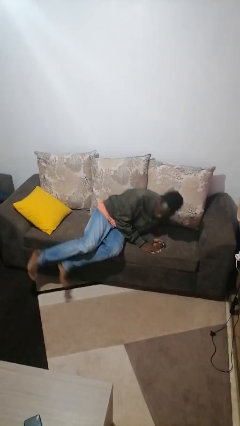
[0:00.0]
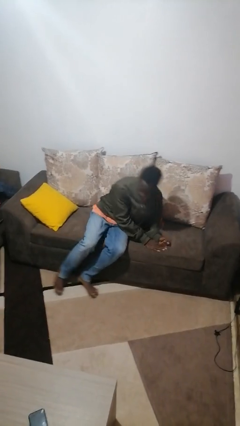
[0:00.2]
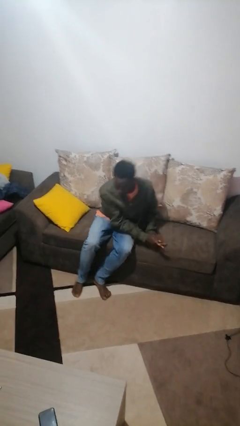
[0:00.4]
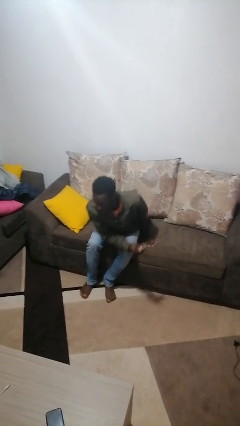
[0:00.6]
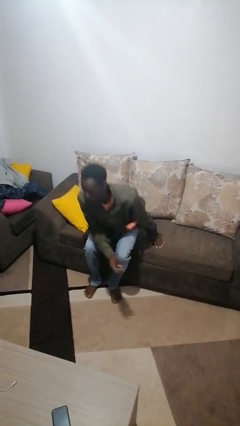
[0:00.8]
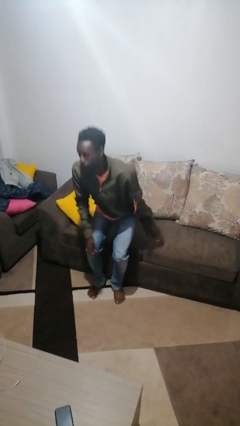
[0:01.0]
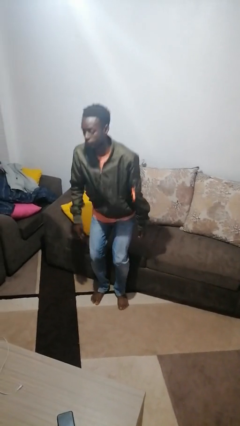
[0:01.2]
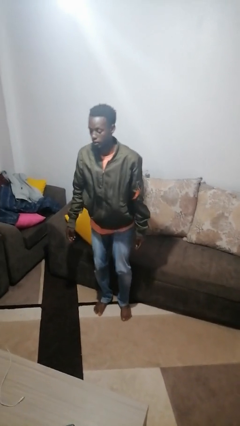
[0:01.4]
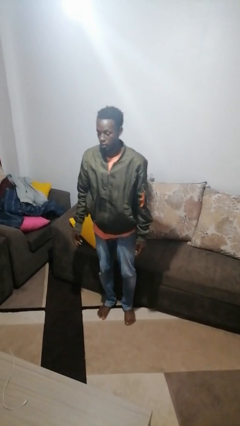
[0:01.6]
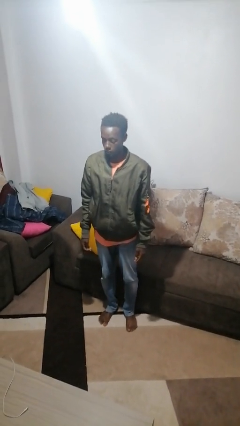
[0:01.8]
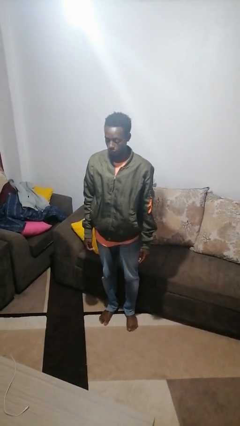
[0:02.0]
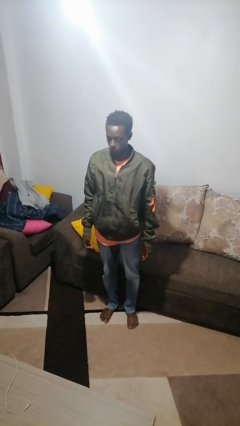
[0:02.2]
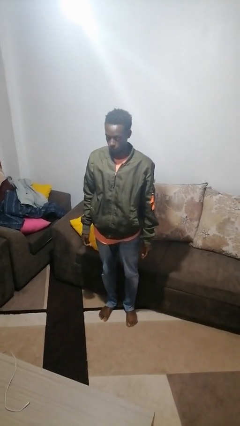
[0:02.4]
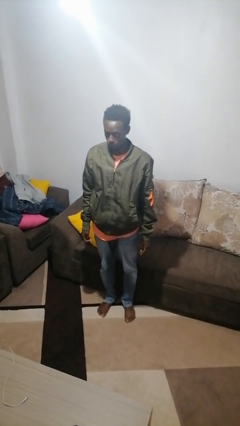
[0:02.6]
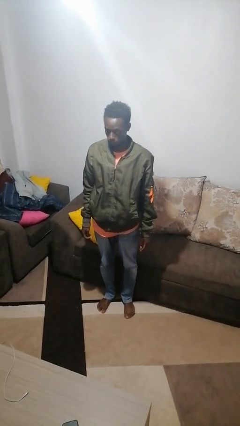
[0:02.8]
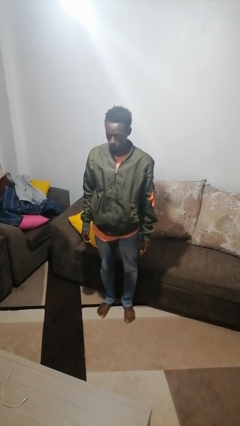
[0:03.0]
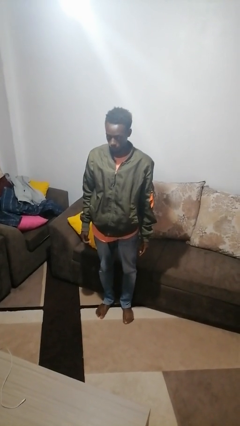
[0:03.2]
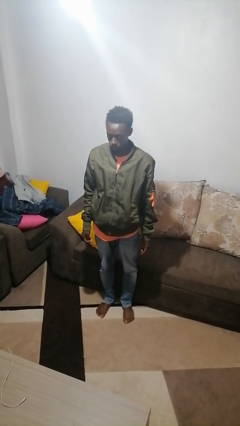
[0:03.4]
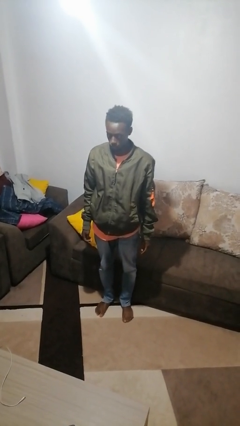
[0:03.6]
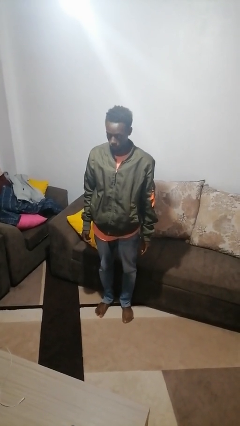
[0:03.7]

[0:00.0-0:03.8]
person stands up

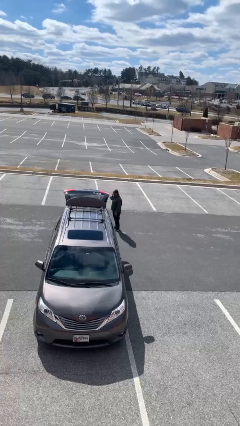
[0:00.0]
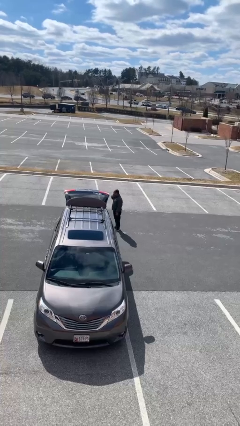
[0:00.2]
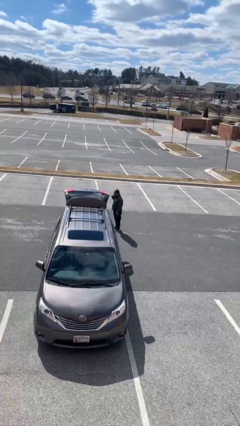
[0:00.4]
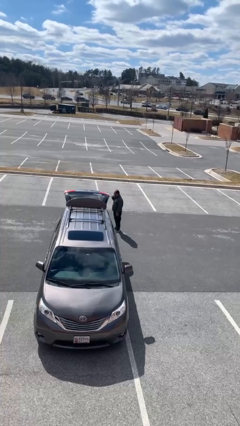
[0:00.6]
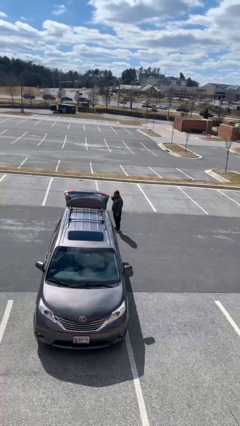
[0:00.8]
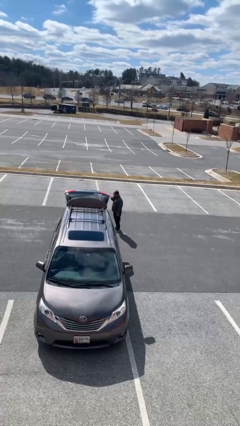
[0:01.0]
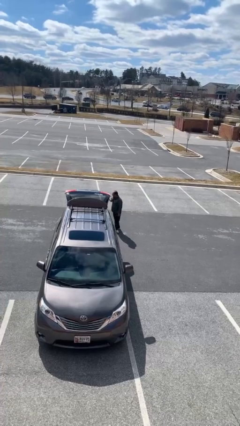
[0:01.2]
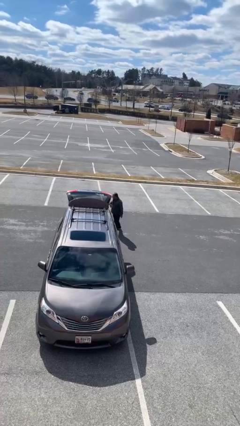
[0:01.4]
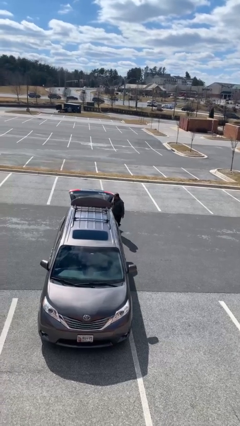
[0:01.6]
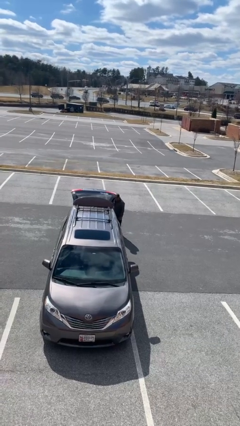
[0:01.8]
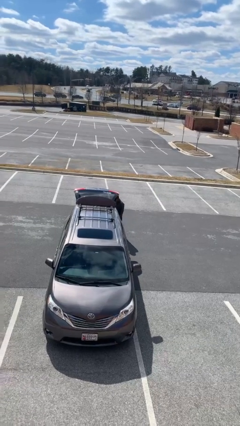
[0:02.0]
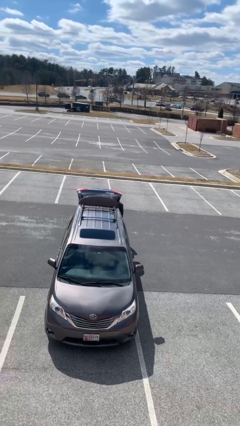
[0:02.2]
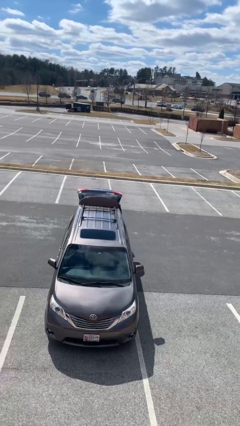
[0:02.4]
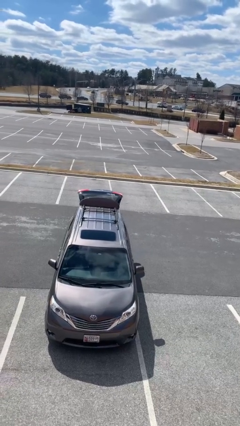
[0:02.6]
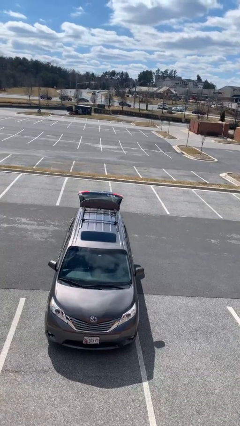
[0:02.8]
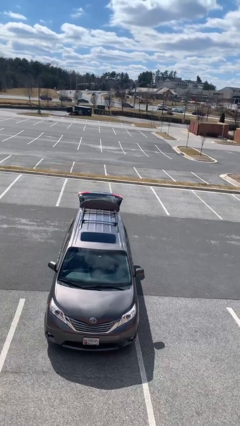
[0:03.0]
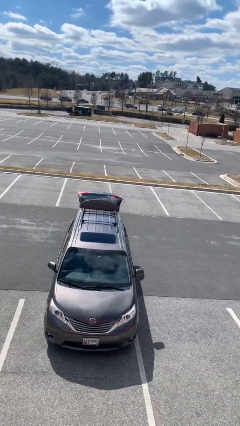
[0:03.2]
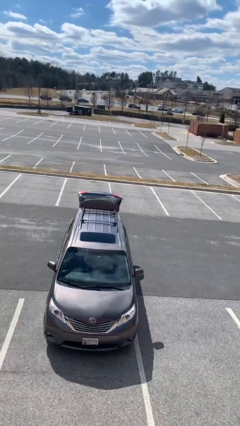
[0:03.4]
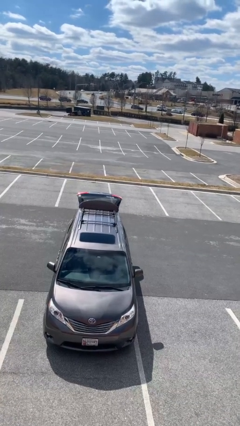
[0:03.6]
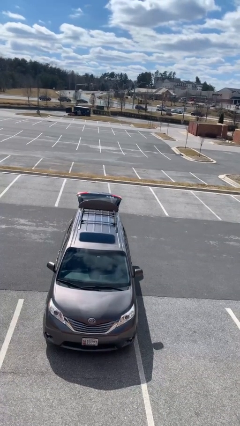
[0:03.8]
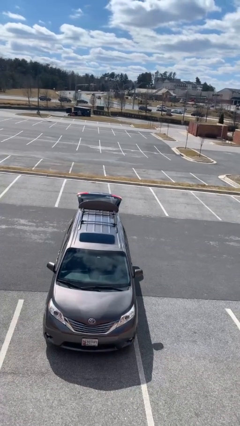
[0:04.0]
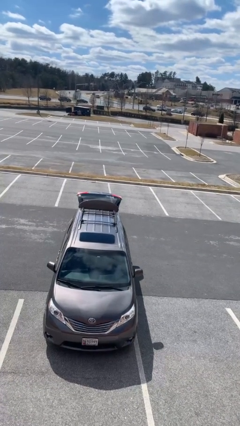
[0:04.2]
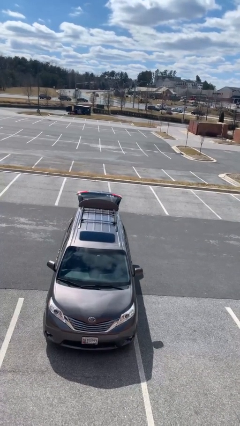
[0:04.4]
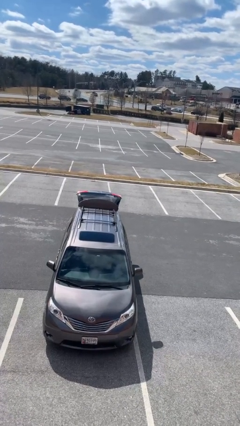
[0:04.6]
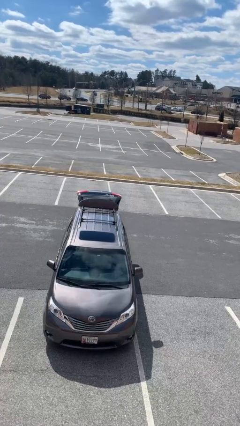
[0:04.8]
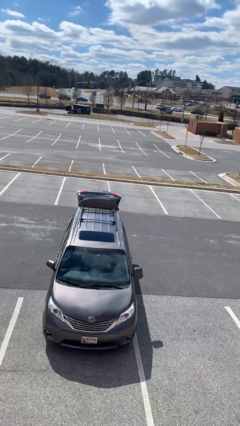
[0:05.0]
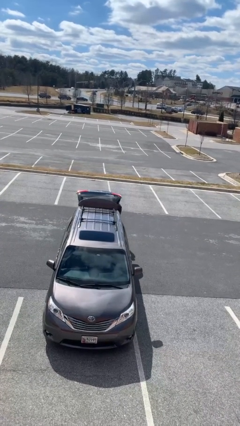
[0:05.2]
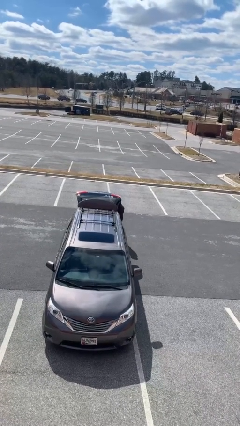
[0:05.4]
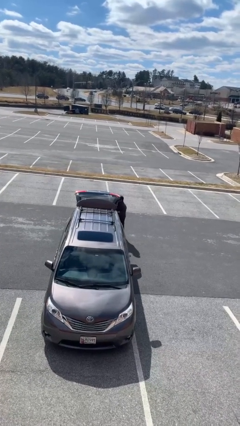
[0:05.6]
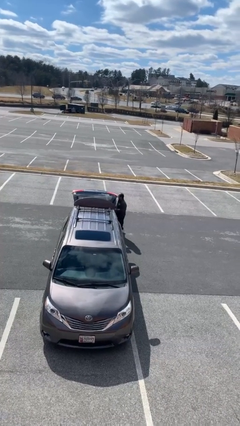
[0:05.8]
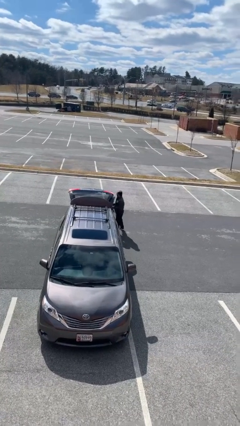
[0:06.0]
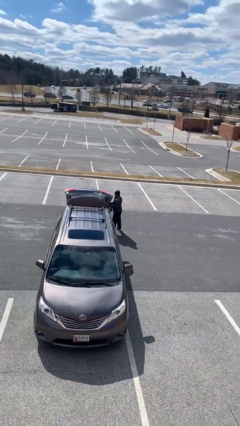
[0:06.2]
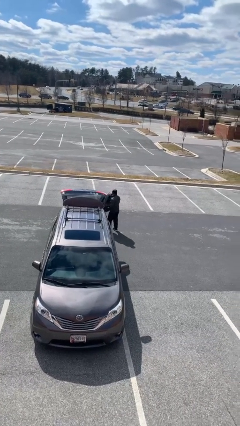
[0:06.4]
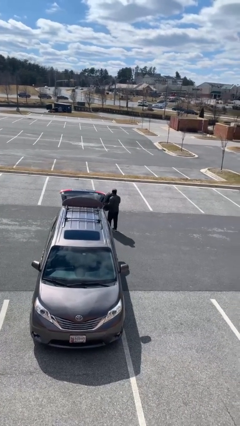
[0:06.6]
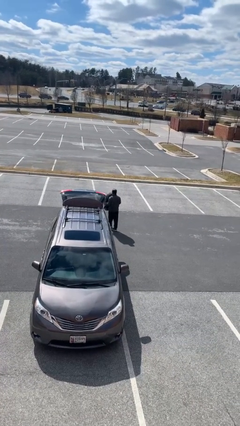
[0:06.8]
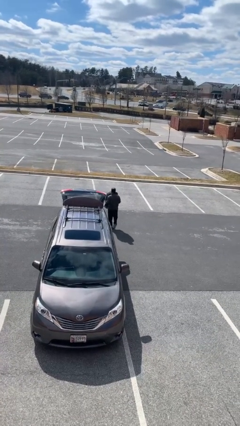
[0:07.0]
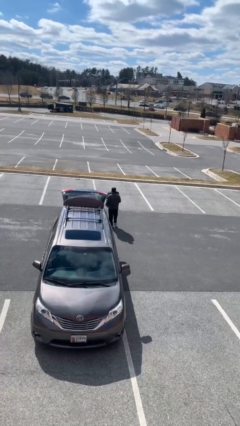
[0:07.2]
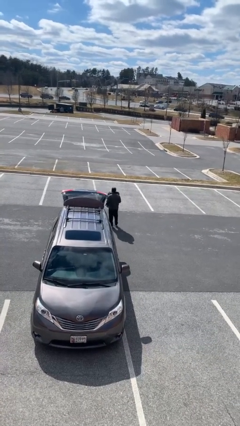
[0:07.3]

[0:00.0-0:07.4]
person unloads car

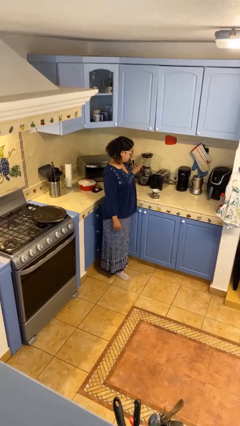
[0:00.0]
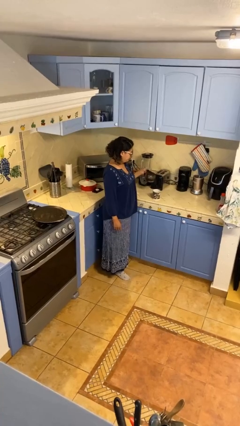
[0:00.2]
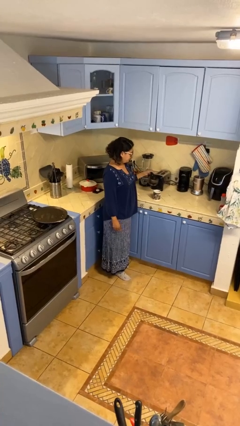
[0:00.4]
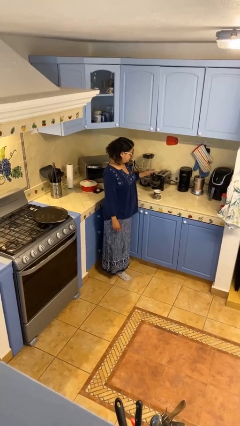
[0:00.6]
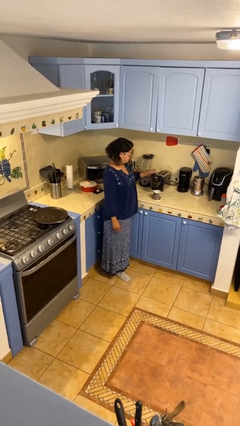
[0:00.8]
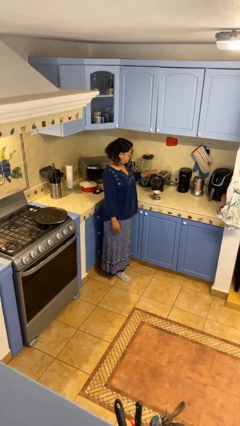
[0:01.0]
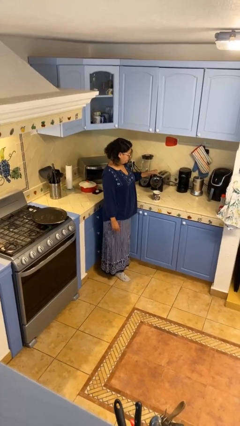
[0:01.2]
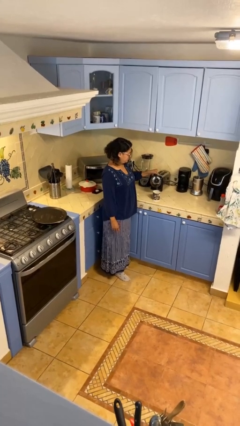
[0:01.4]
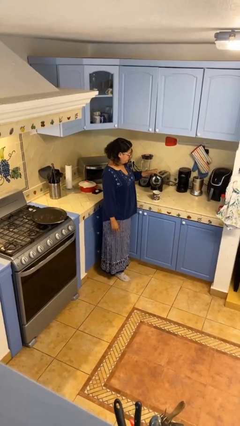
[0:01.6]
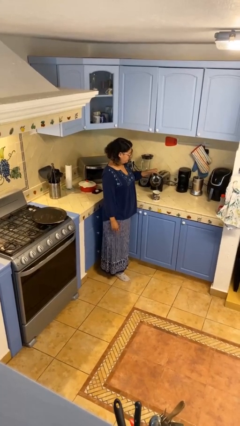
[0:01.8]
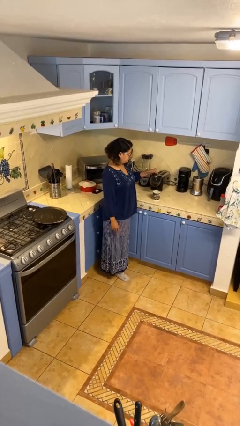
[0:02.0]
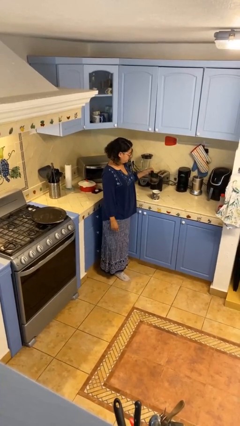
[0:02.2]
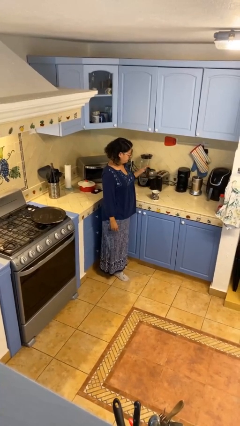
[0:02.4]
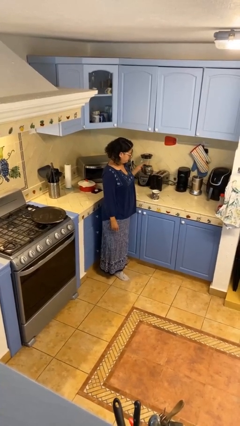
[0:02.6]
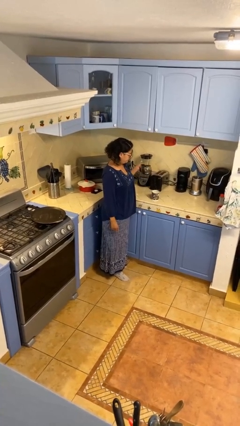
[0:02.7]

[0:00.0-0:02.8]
person pours coffee into mug

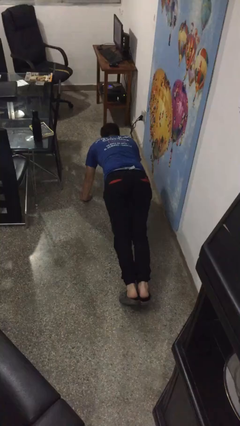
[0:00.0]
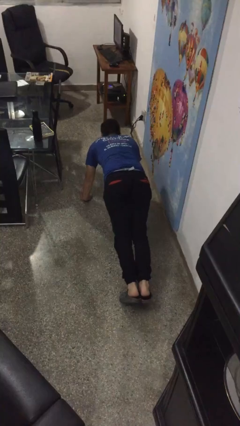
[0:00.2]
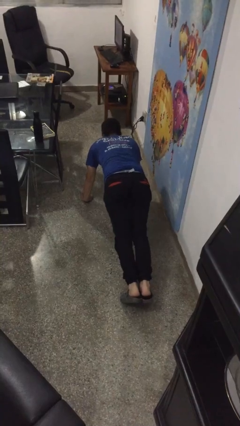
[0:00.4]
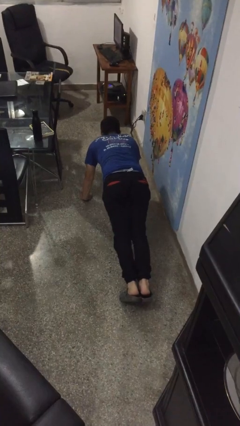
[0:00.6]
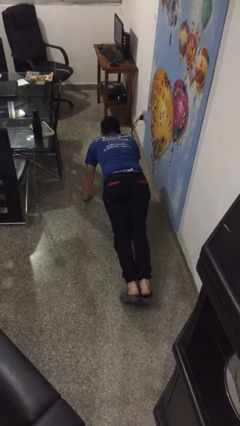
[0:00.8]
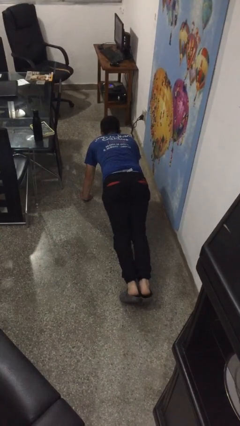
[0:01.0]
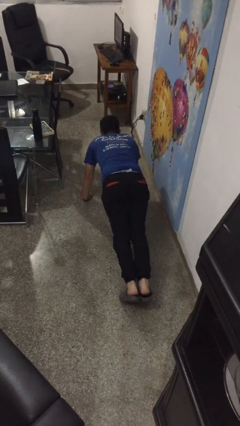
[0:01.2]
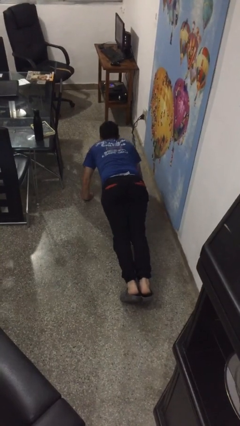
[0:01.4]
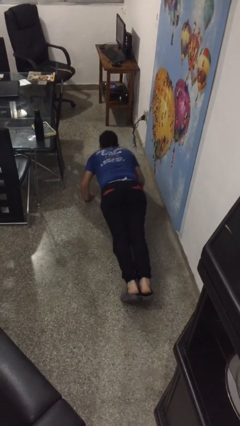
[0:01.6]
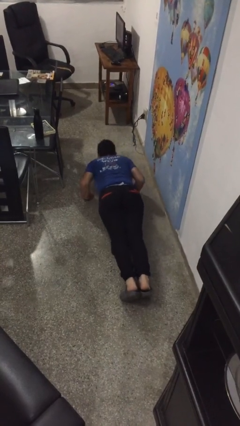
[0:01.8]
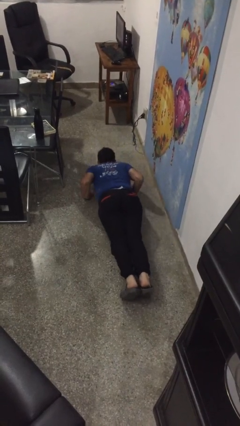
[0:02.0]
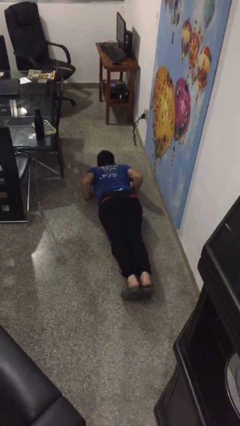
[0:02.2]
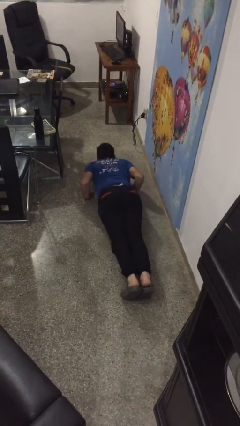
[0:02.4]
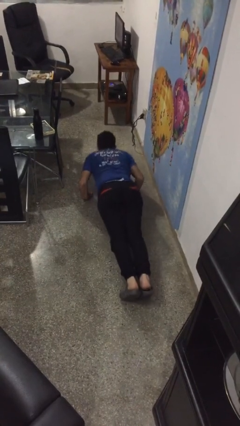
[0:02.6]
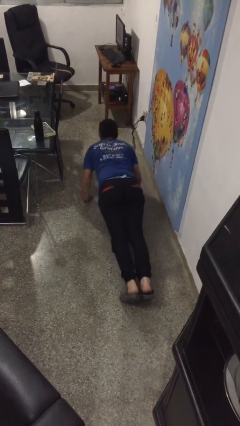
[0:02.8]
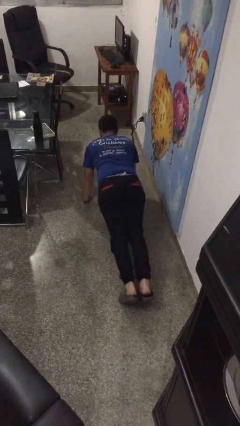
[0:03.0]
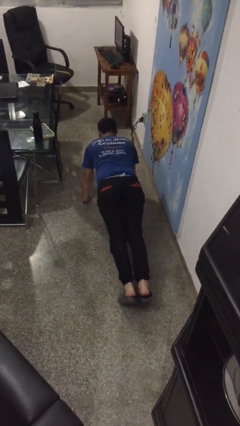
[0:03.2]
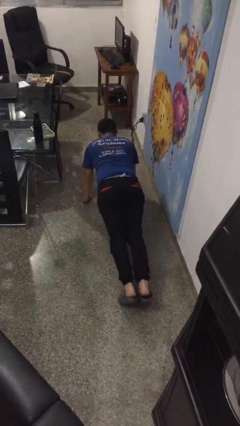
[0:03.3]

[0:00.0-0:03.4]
person exercises with pushup

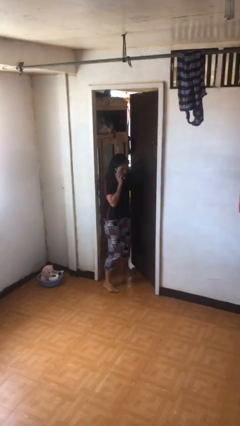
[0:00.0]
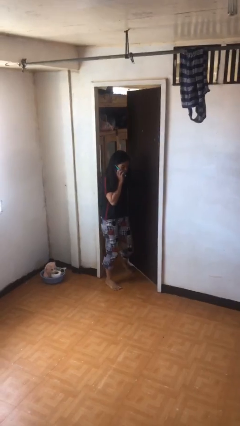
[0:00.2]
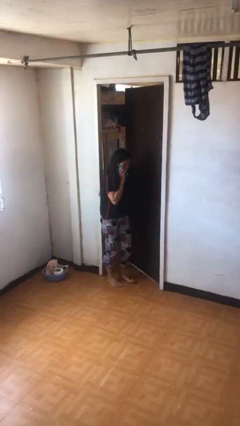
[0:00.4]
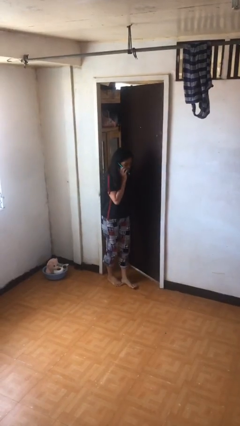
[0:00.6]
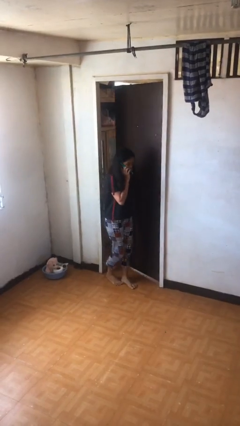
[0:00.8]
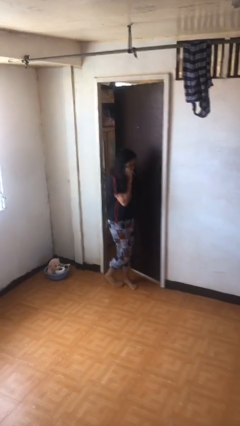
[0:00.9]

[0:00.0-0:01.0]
person enters scene through structure
